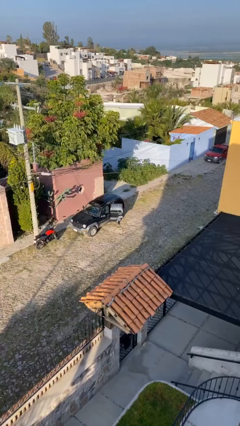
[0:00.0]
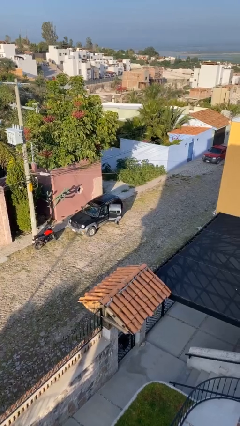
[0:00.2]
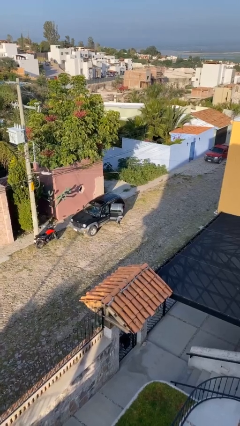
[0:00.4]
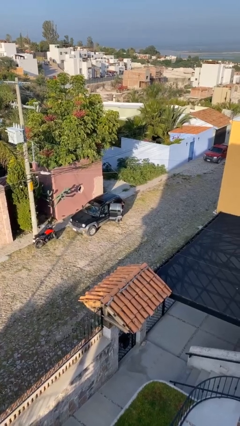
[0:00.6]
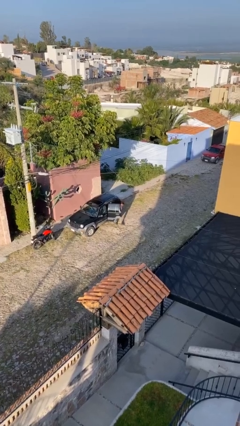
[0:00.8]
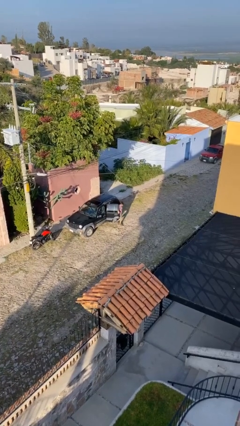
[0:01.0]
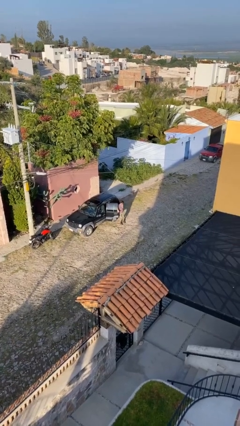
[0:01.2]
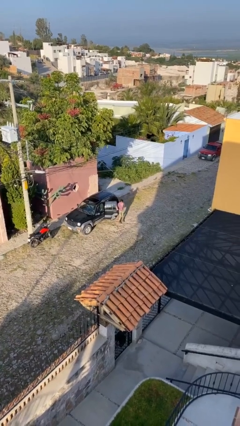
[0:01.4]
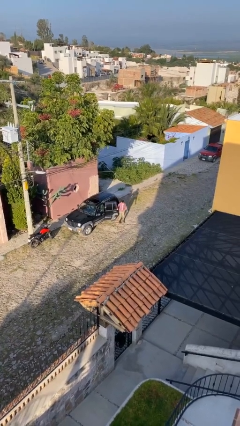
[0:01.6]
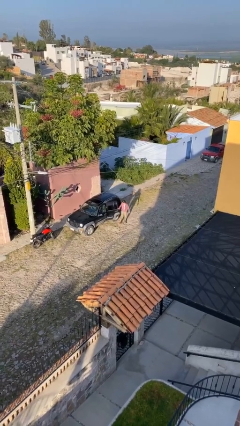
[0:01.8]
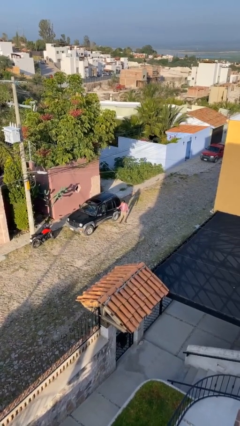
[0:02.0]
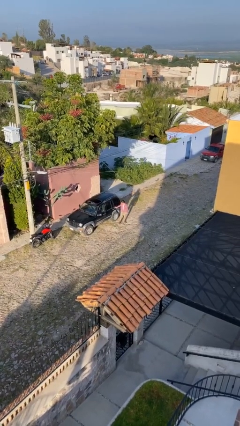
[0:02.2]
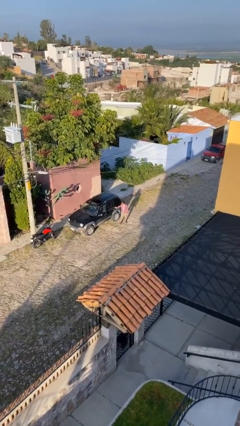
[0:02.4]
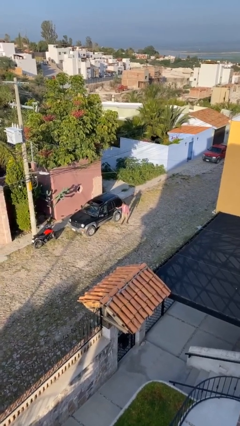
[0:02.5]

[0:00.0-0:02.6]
person exits car

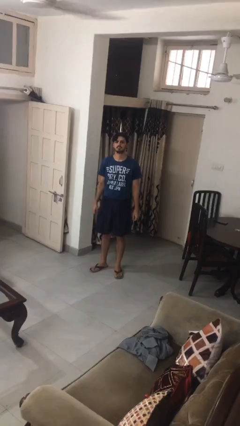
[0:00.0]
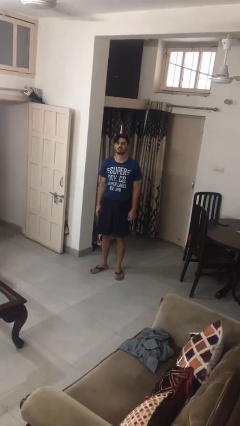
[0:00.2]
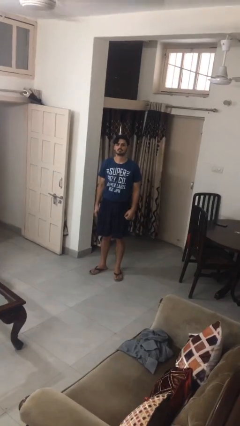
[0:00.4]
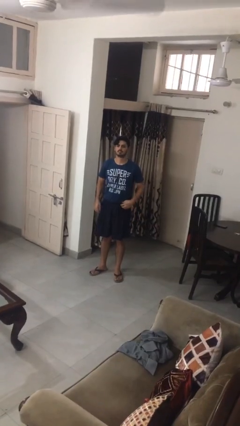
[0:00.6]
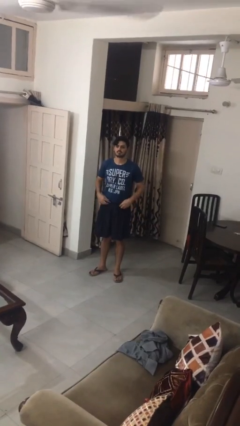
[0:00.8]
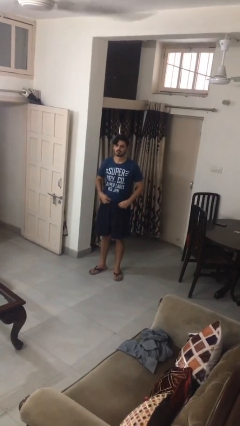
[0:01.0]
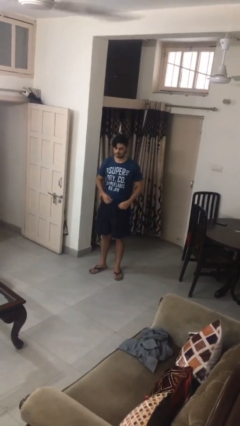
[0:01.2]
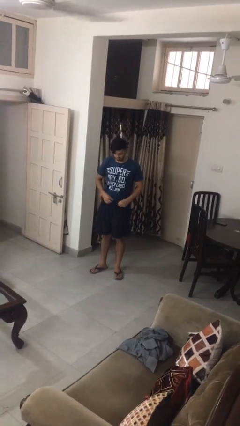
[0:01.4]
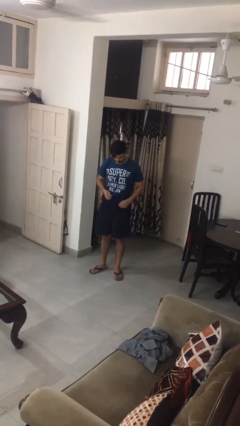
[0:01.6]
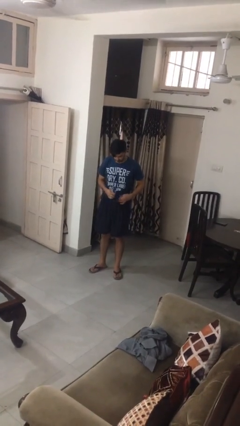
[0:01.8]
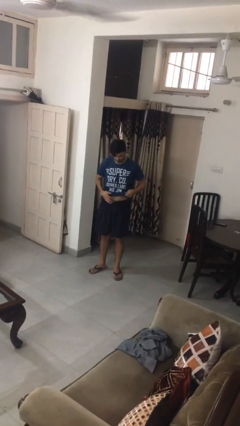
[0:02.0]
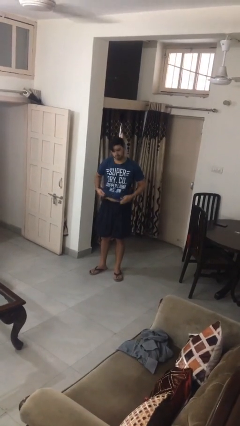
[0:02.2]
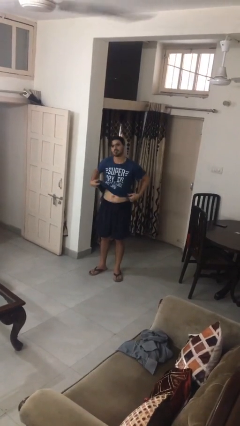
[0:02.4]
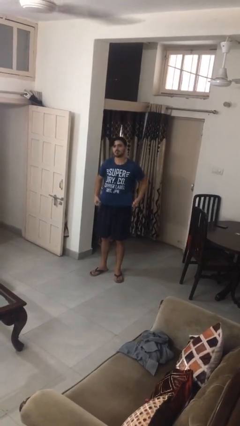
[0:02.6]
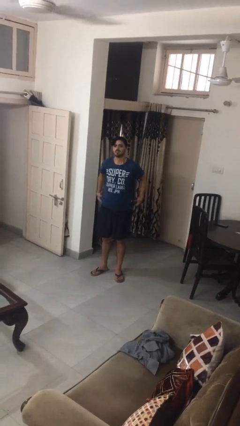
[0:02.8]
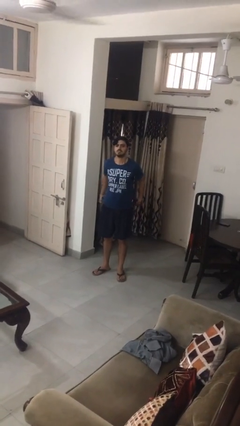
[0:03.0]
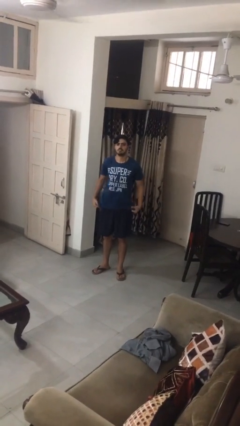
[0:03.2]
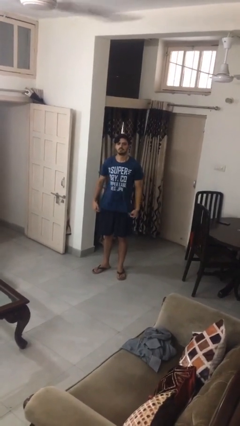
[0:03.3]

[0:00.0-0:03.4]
person untucks shirt

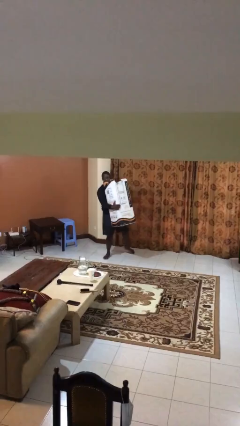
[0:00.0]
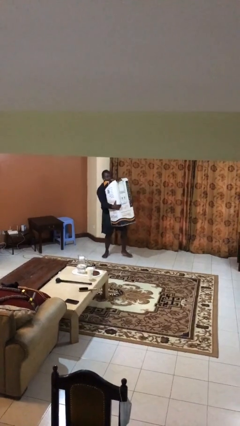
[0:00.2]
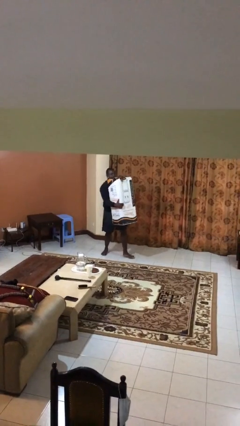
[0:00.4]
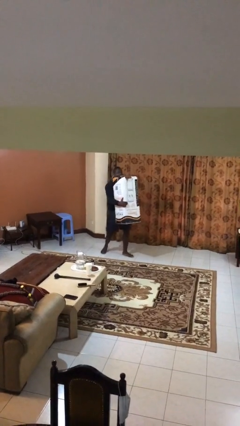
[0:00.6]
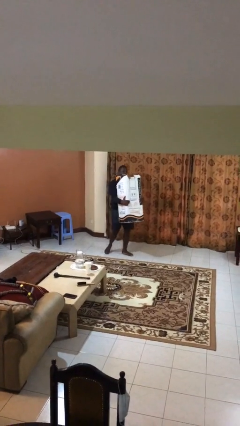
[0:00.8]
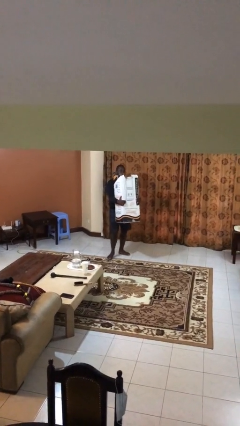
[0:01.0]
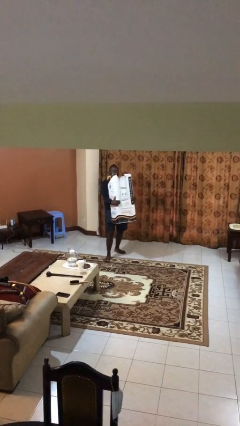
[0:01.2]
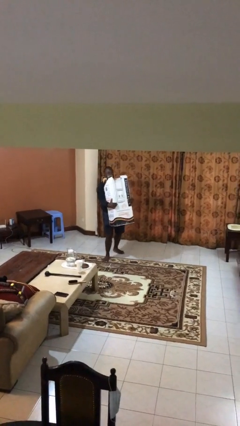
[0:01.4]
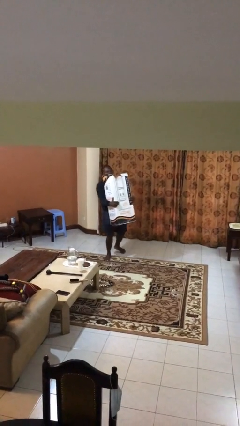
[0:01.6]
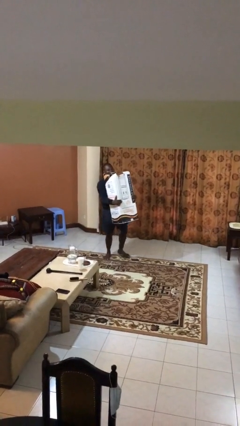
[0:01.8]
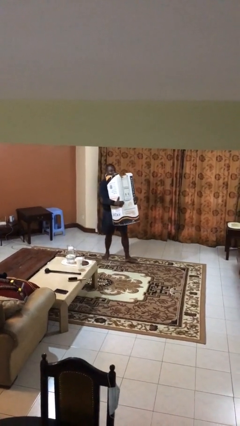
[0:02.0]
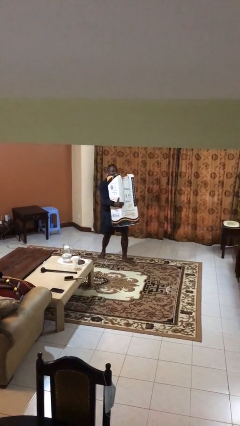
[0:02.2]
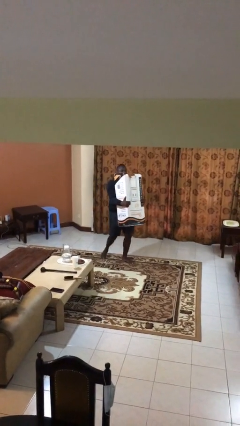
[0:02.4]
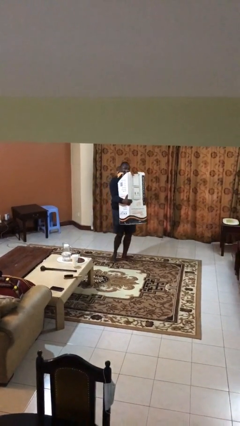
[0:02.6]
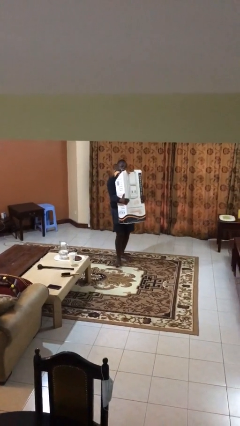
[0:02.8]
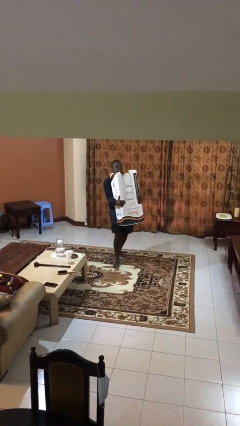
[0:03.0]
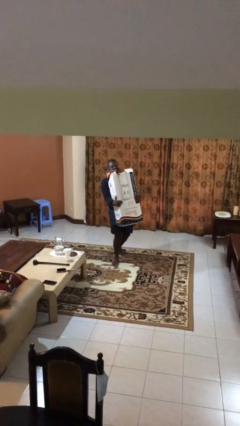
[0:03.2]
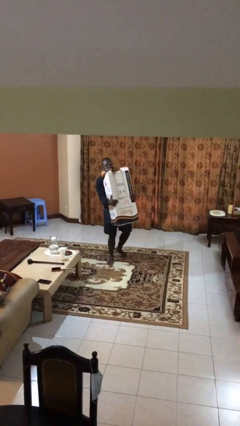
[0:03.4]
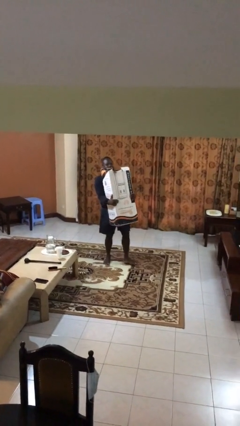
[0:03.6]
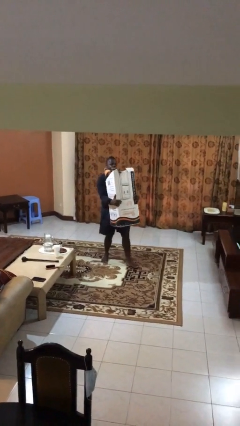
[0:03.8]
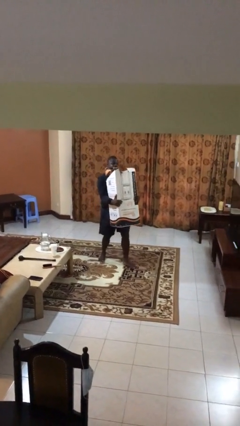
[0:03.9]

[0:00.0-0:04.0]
person carries heavy object

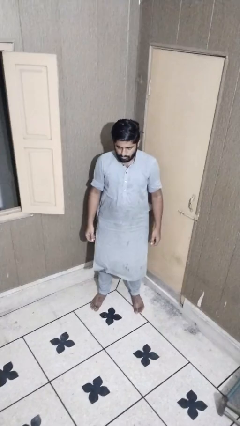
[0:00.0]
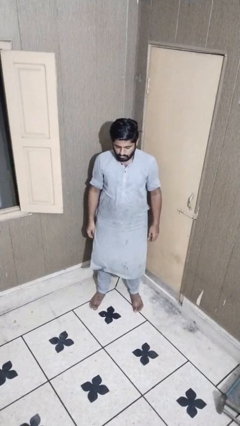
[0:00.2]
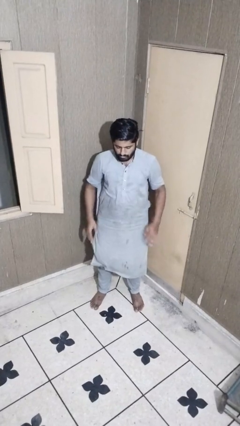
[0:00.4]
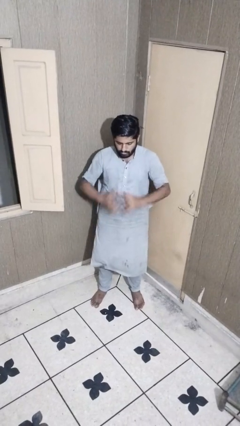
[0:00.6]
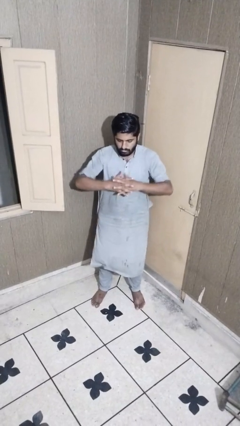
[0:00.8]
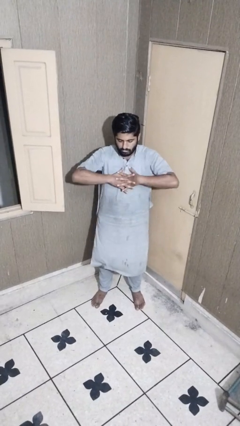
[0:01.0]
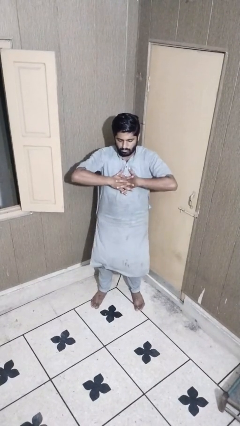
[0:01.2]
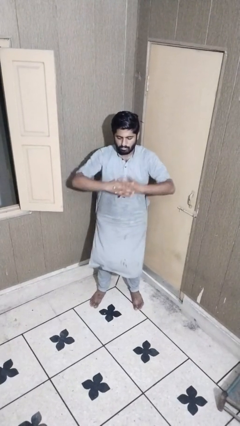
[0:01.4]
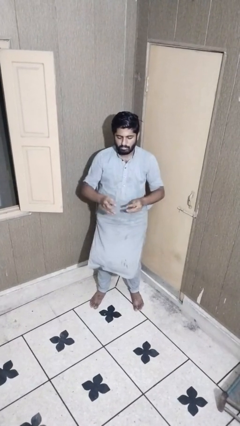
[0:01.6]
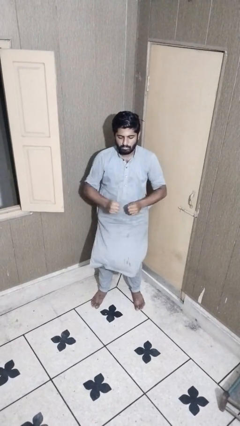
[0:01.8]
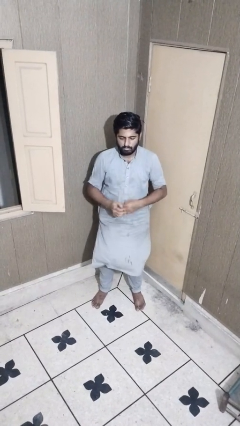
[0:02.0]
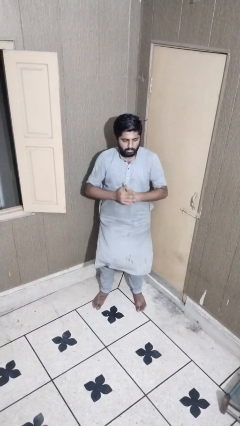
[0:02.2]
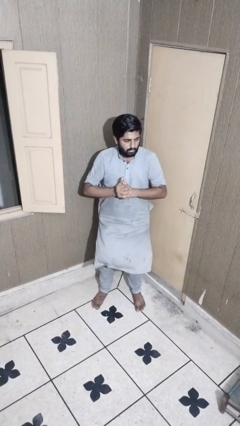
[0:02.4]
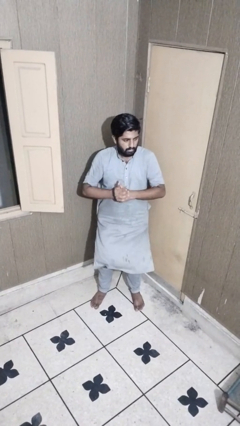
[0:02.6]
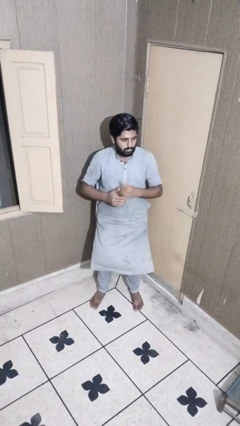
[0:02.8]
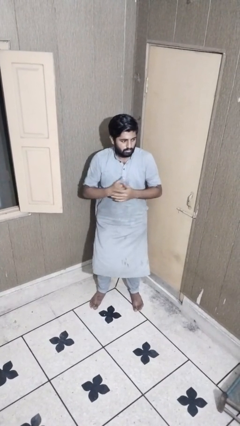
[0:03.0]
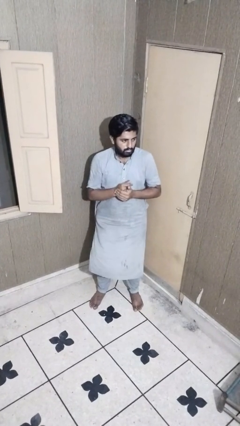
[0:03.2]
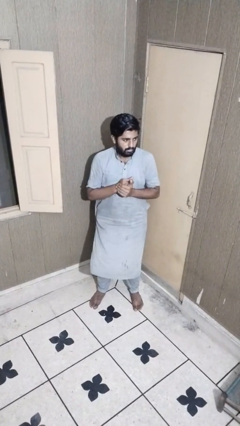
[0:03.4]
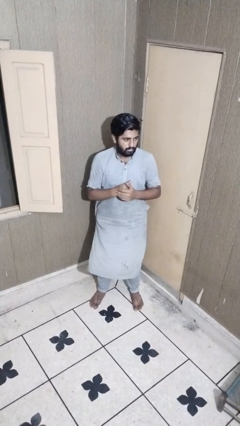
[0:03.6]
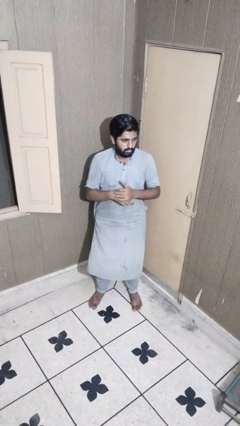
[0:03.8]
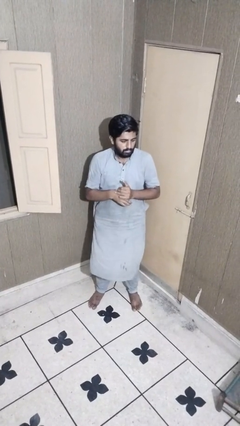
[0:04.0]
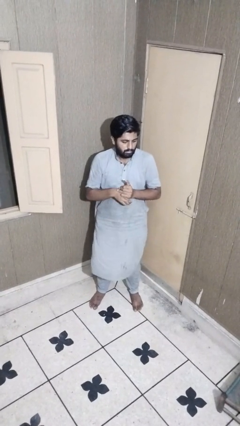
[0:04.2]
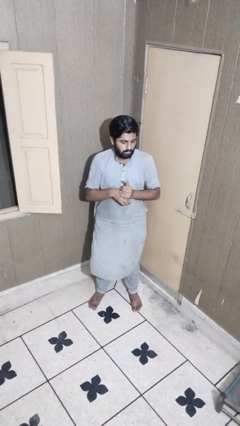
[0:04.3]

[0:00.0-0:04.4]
person cracks knuckles

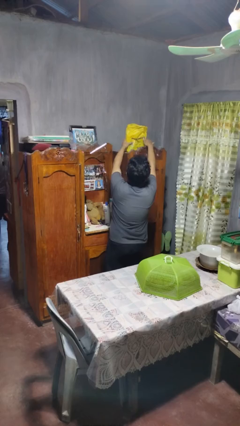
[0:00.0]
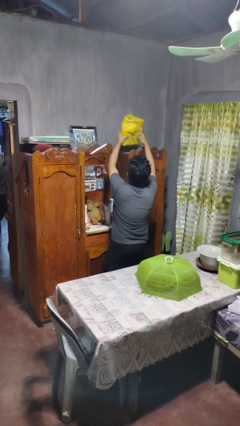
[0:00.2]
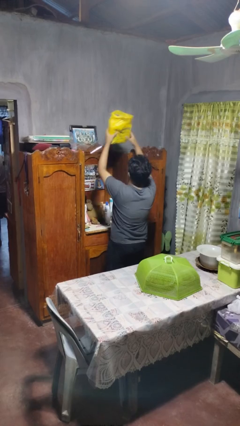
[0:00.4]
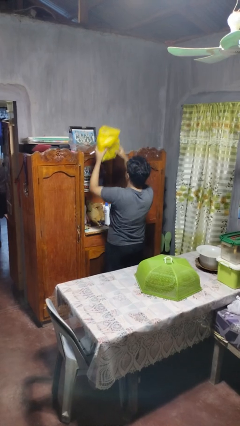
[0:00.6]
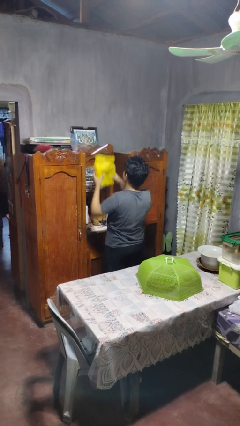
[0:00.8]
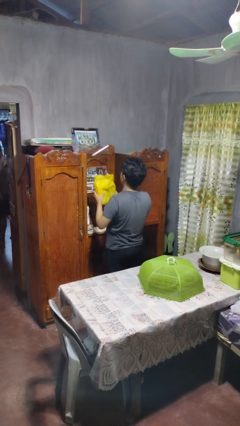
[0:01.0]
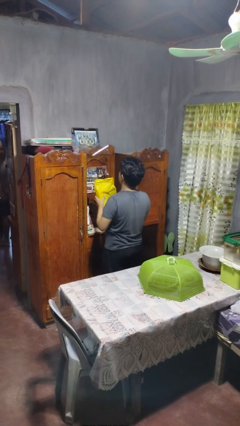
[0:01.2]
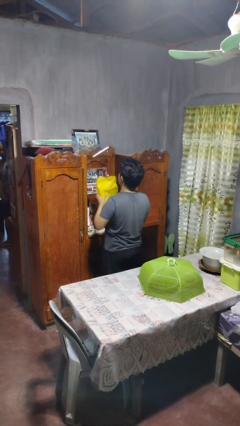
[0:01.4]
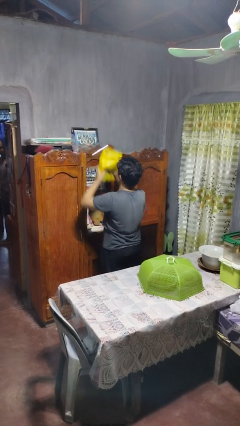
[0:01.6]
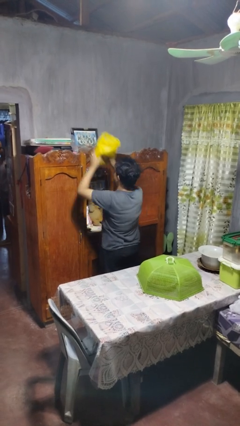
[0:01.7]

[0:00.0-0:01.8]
person picks up object from shelf

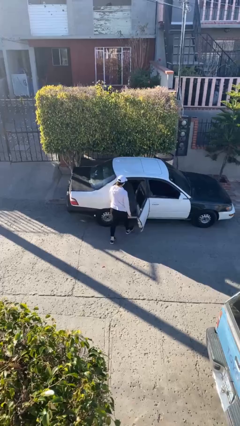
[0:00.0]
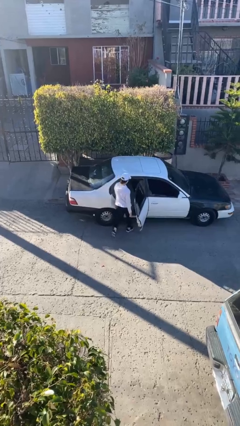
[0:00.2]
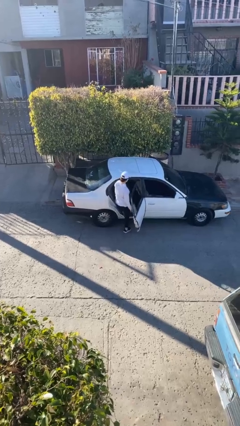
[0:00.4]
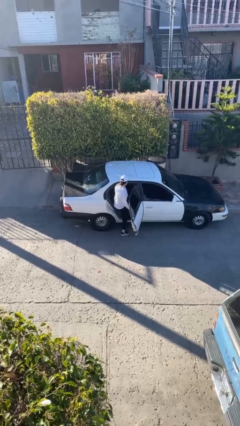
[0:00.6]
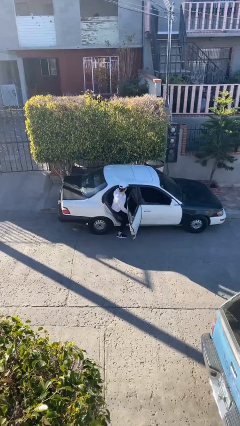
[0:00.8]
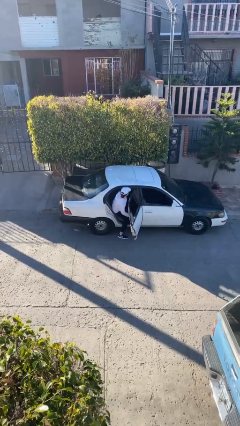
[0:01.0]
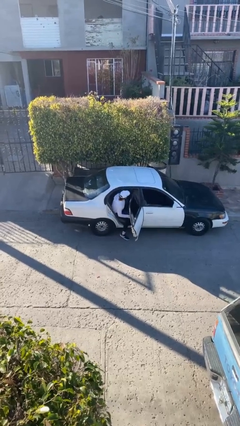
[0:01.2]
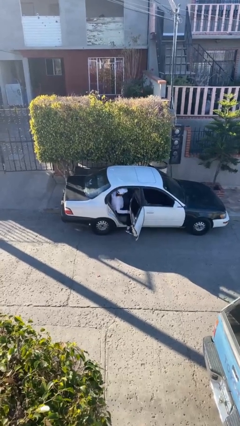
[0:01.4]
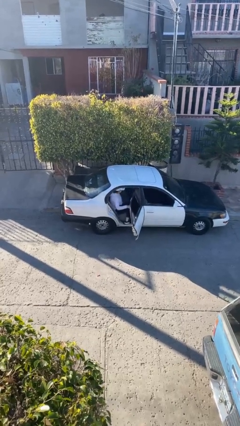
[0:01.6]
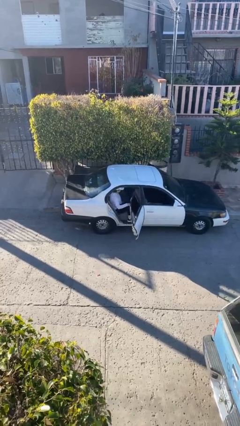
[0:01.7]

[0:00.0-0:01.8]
person enters car
